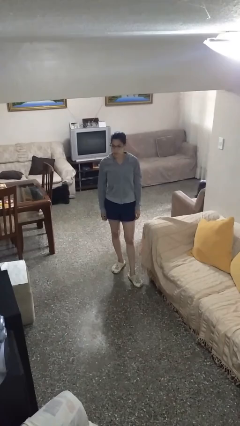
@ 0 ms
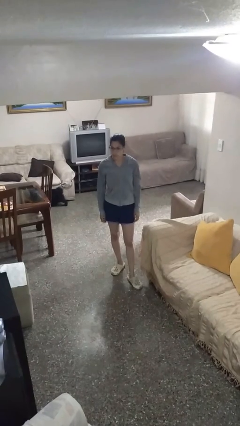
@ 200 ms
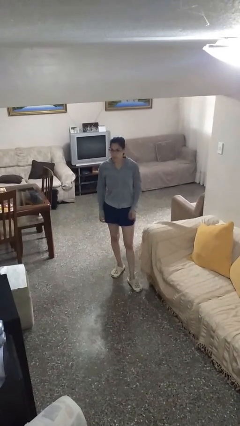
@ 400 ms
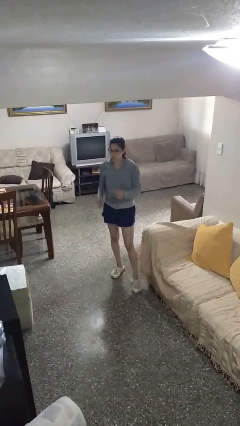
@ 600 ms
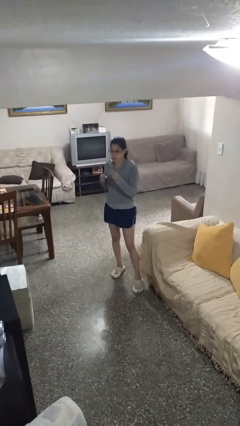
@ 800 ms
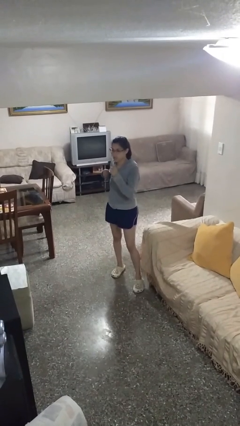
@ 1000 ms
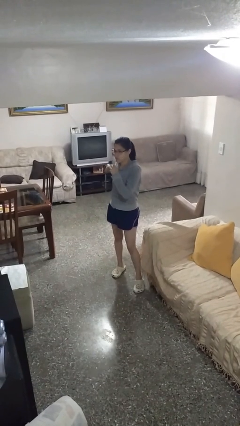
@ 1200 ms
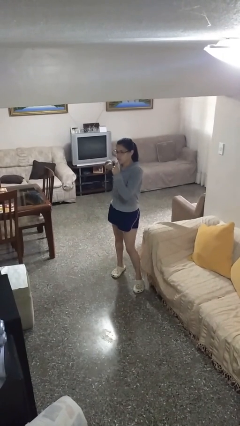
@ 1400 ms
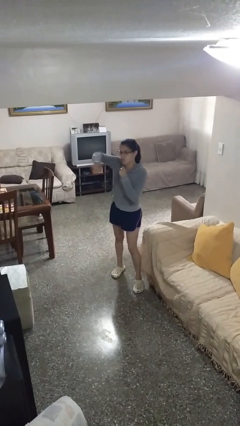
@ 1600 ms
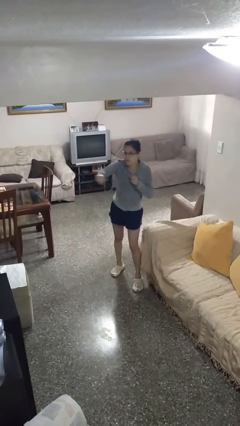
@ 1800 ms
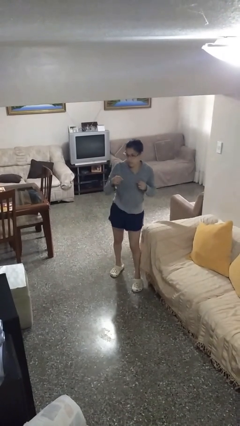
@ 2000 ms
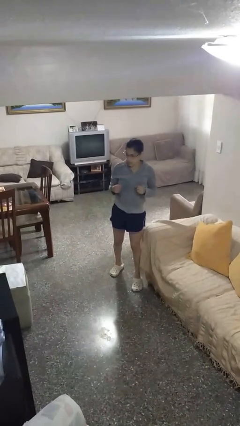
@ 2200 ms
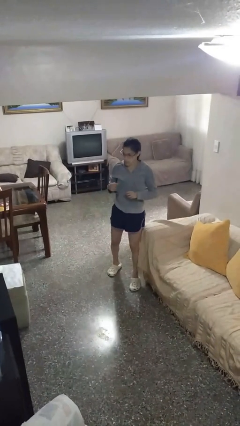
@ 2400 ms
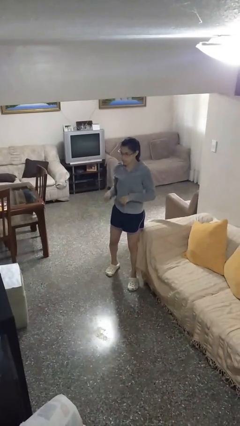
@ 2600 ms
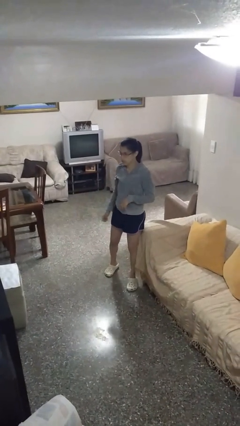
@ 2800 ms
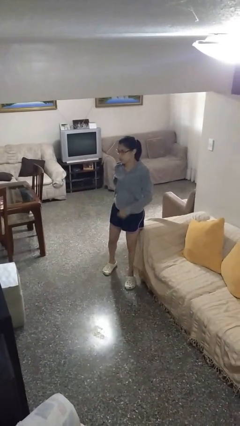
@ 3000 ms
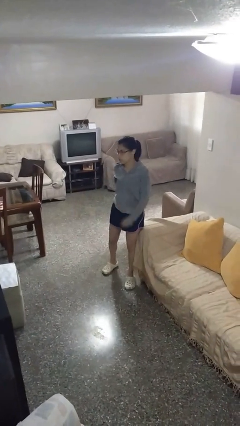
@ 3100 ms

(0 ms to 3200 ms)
person punches

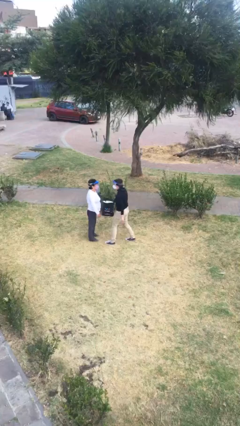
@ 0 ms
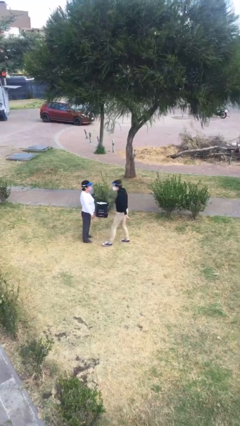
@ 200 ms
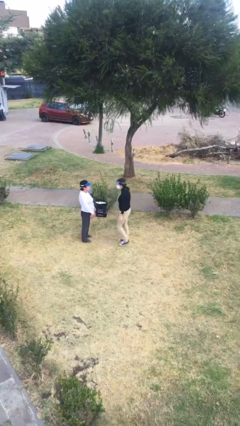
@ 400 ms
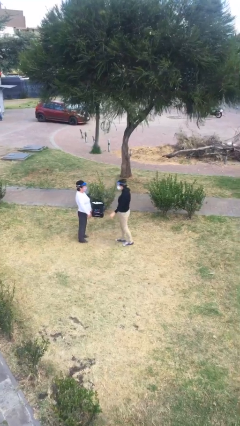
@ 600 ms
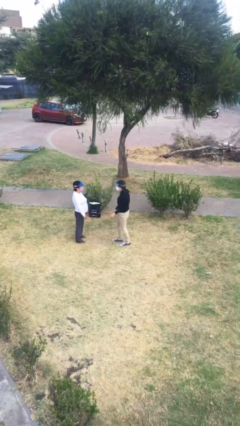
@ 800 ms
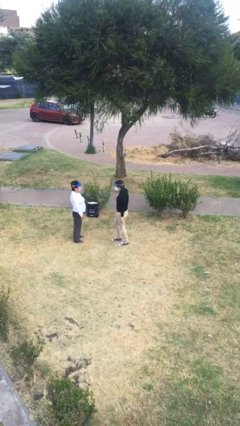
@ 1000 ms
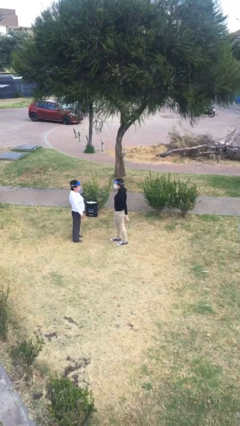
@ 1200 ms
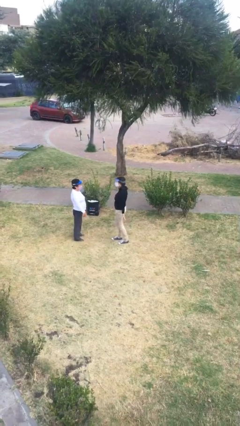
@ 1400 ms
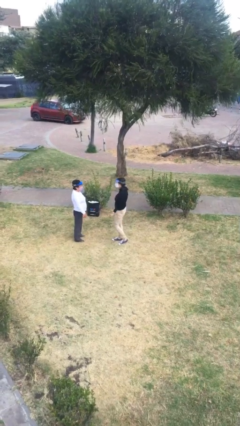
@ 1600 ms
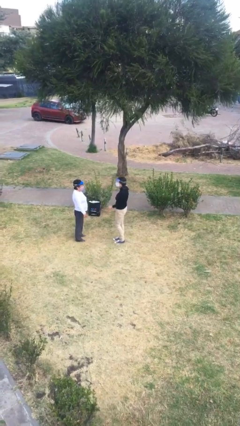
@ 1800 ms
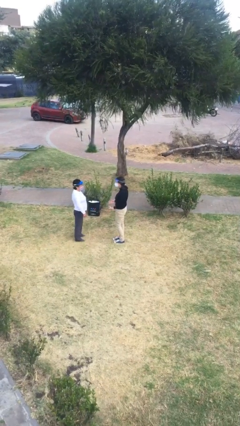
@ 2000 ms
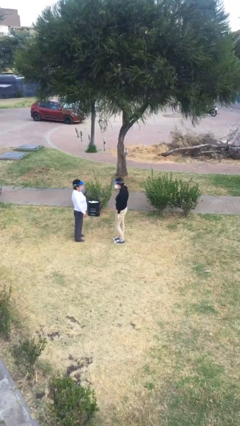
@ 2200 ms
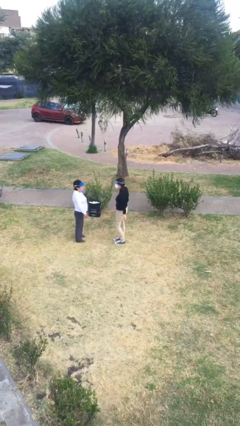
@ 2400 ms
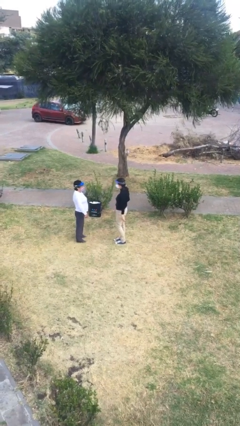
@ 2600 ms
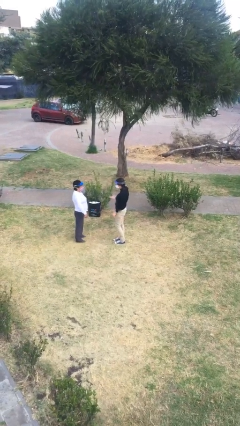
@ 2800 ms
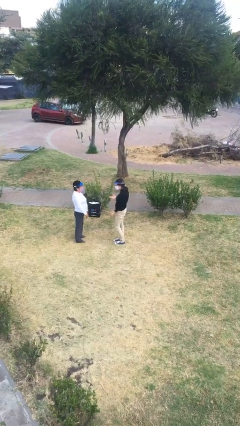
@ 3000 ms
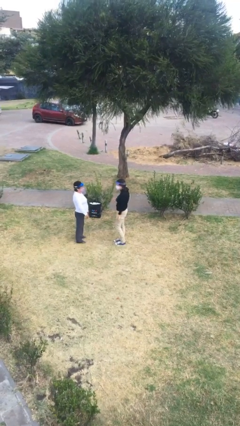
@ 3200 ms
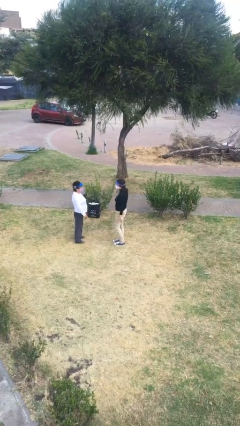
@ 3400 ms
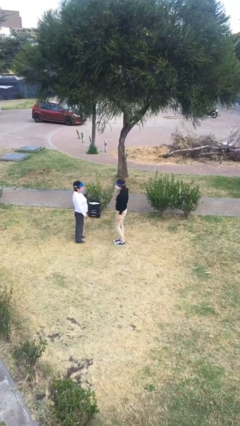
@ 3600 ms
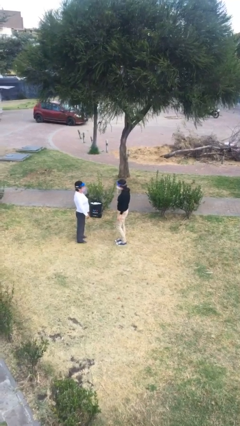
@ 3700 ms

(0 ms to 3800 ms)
person talks to person

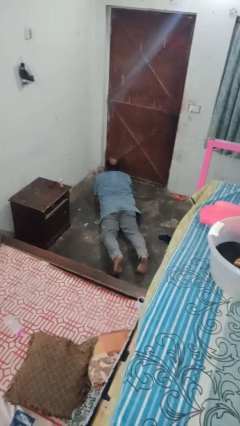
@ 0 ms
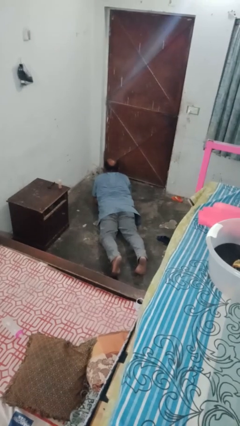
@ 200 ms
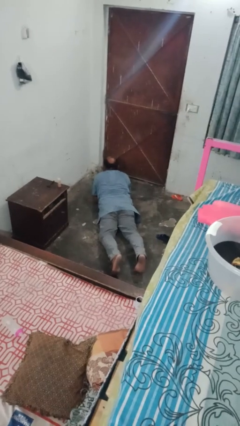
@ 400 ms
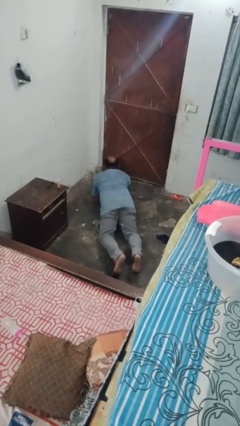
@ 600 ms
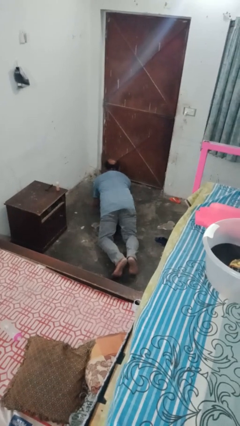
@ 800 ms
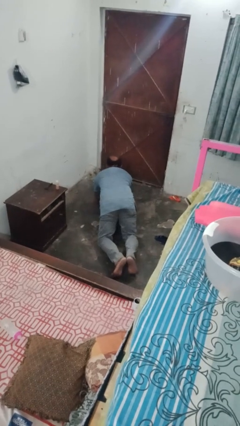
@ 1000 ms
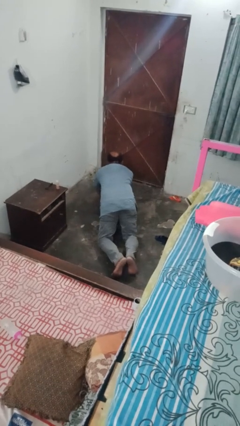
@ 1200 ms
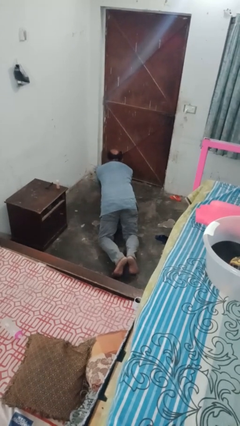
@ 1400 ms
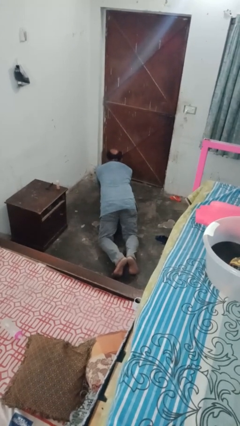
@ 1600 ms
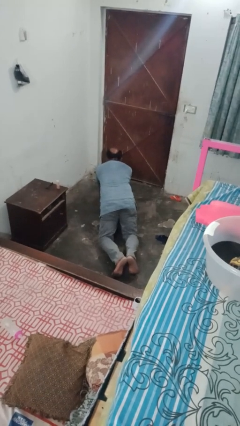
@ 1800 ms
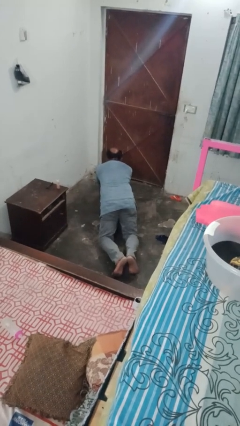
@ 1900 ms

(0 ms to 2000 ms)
person exercises with plank

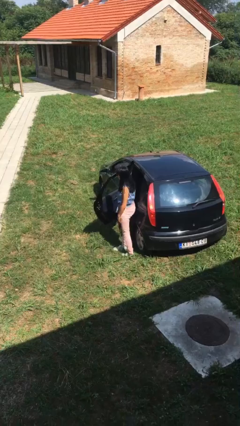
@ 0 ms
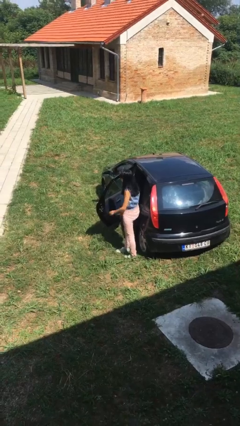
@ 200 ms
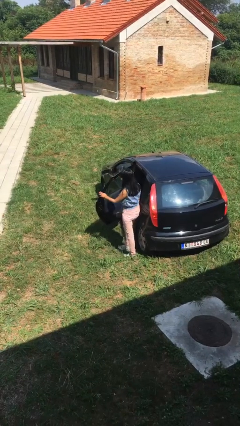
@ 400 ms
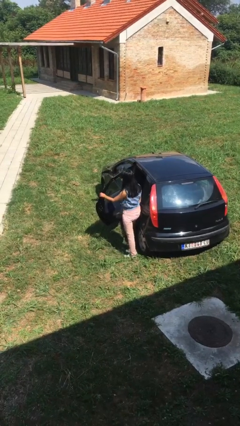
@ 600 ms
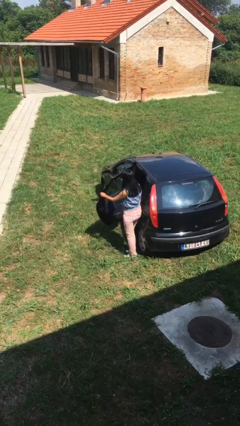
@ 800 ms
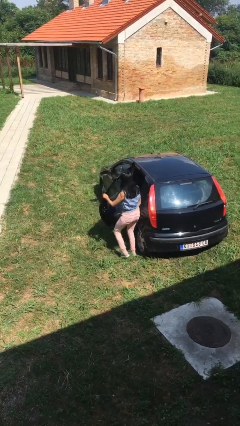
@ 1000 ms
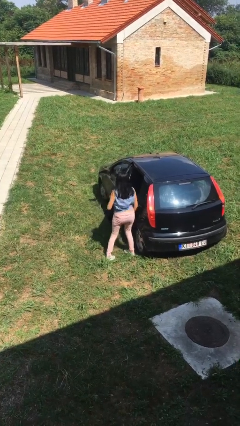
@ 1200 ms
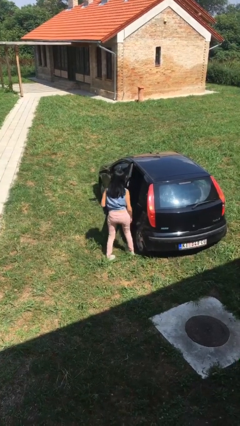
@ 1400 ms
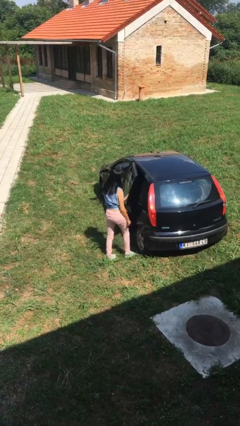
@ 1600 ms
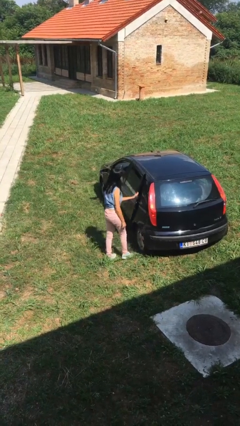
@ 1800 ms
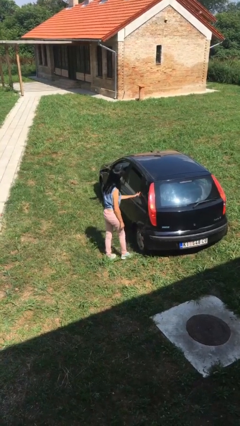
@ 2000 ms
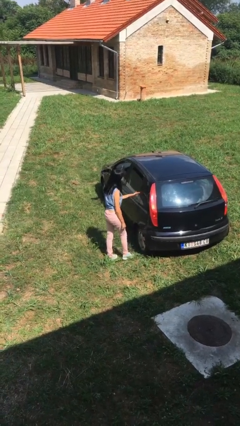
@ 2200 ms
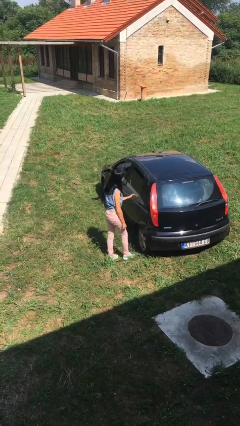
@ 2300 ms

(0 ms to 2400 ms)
person closes car door

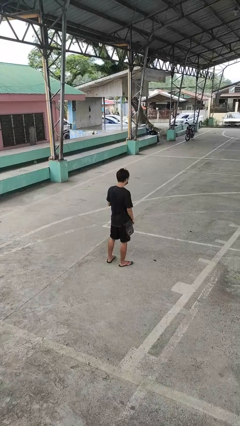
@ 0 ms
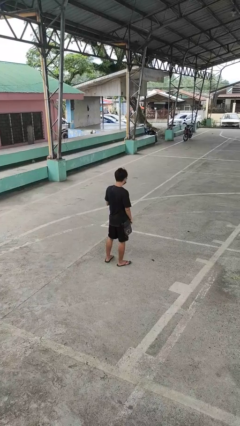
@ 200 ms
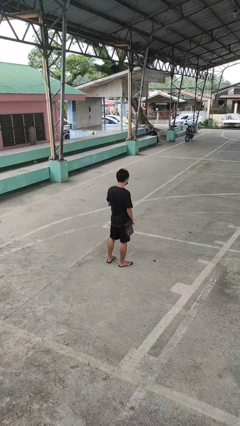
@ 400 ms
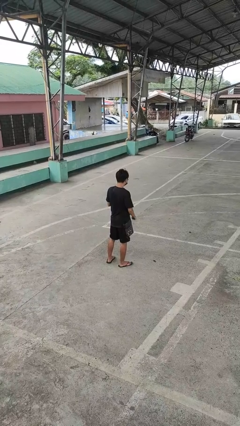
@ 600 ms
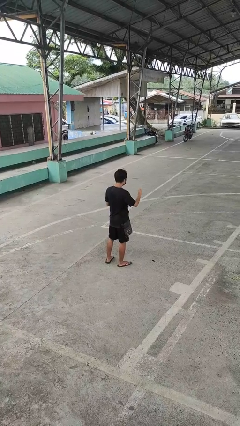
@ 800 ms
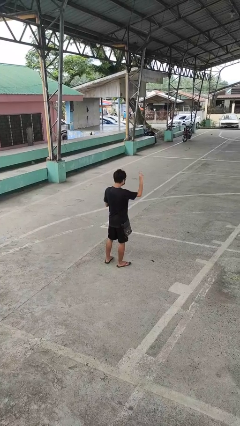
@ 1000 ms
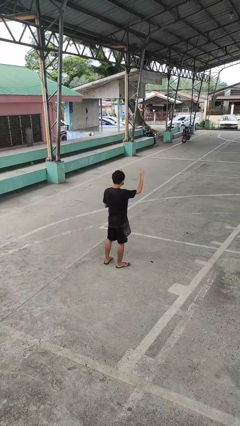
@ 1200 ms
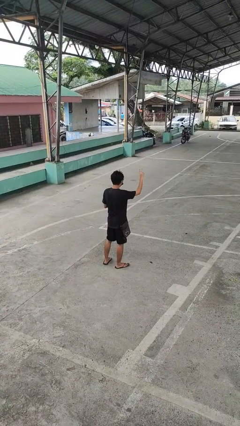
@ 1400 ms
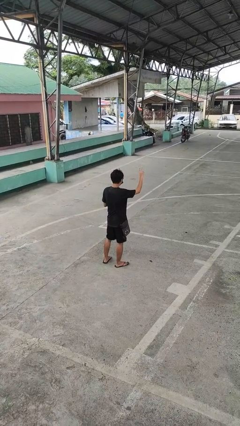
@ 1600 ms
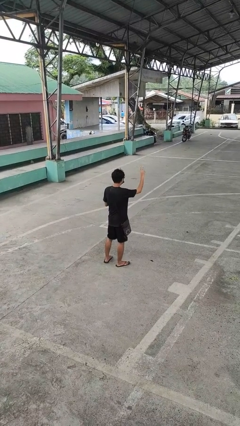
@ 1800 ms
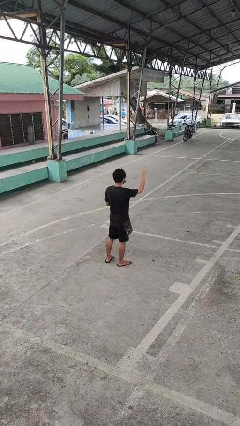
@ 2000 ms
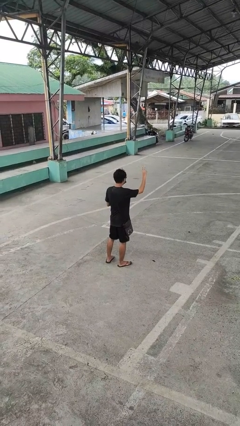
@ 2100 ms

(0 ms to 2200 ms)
person gestures peace

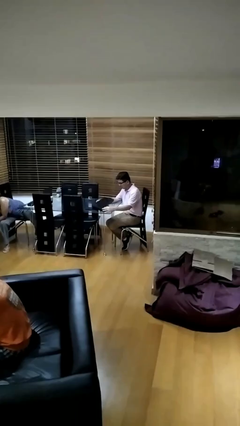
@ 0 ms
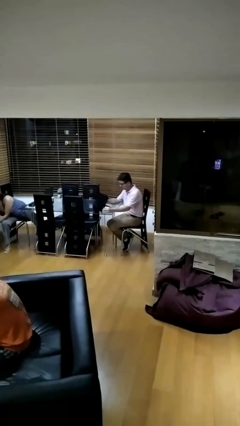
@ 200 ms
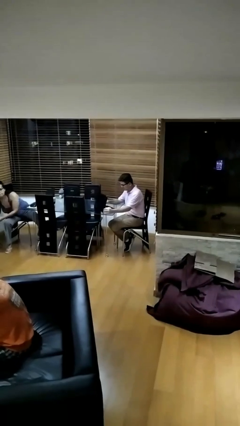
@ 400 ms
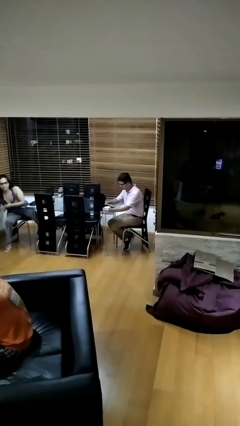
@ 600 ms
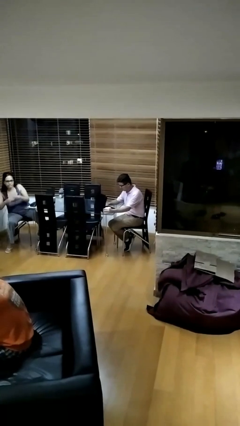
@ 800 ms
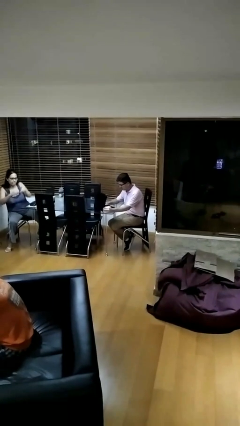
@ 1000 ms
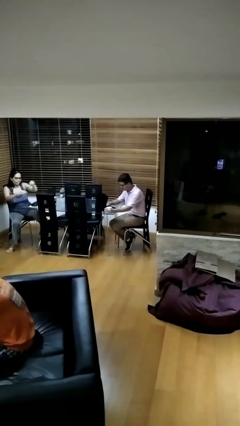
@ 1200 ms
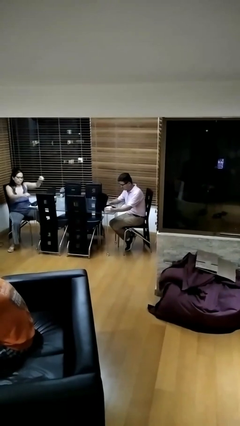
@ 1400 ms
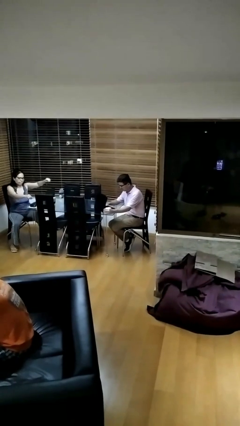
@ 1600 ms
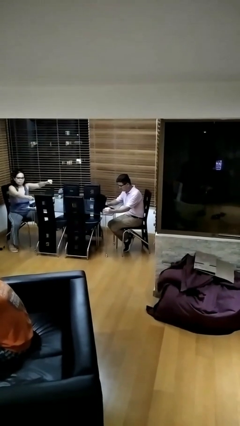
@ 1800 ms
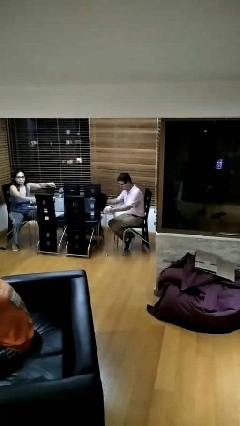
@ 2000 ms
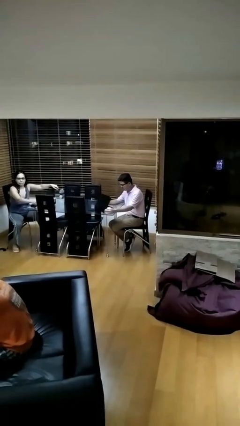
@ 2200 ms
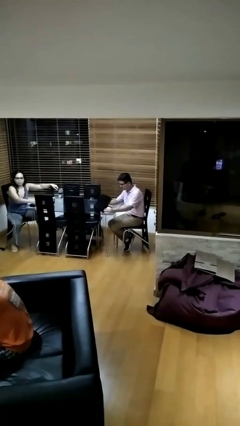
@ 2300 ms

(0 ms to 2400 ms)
person interacts with laptop

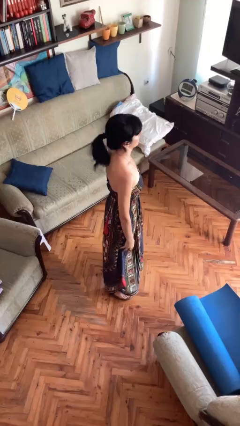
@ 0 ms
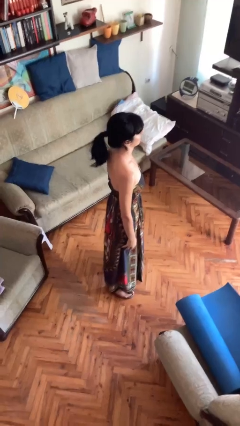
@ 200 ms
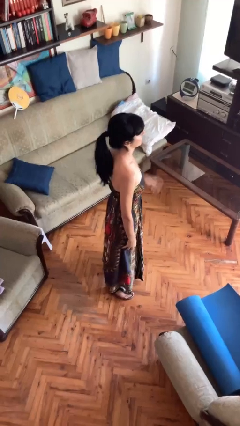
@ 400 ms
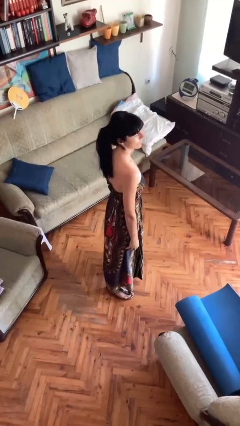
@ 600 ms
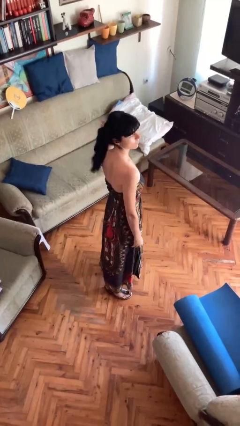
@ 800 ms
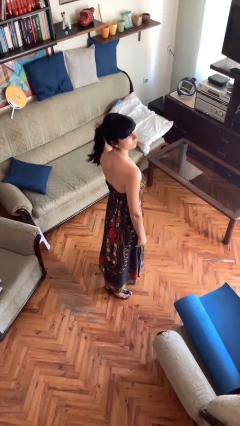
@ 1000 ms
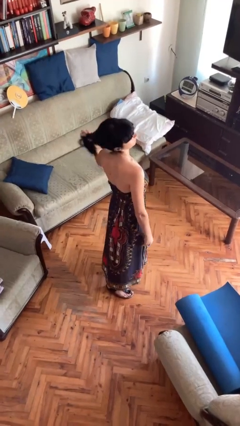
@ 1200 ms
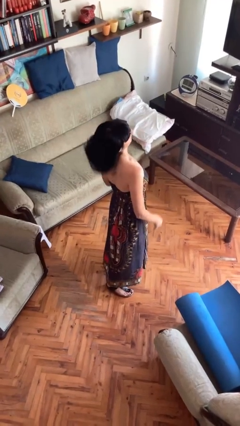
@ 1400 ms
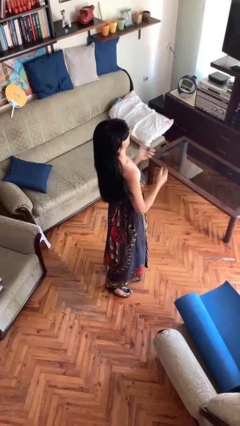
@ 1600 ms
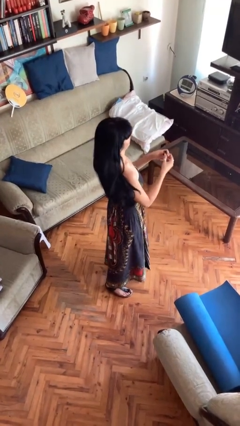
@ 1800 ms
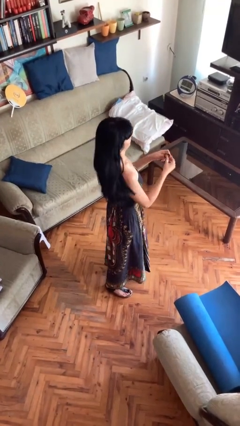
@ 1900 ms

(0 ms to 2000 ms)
person takes off hairtie
